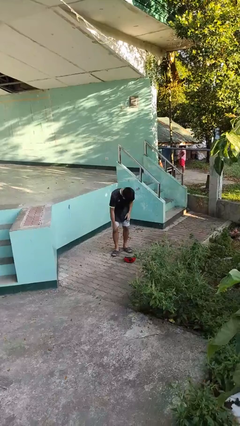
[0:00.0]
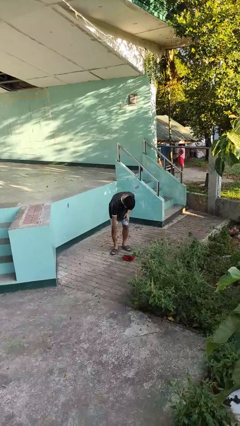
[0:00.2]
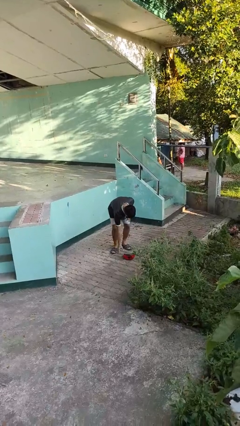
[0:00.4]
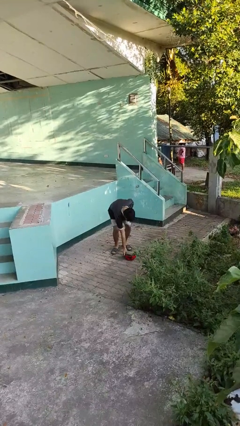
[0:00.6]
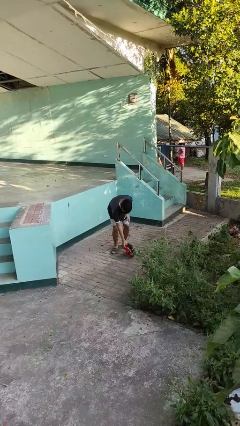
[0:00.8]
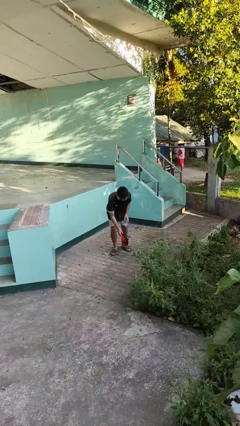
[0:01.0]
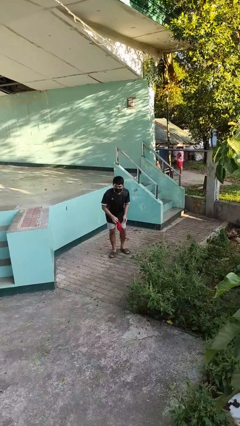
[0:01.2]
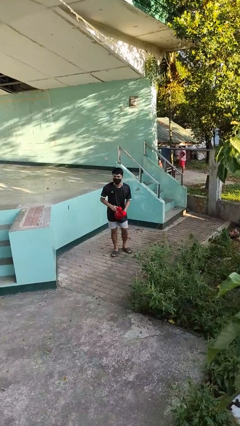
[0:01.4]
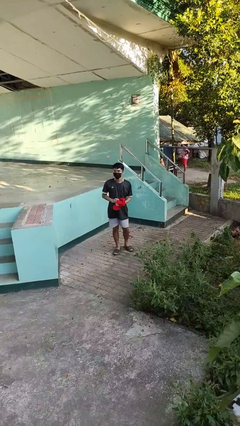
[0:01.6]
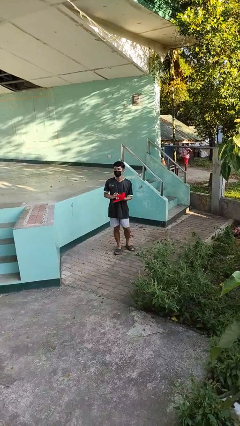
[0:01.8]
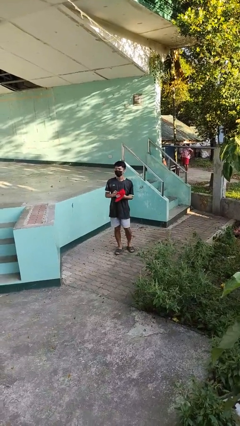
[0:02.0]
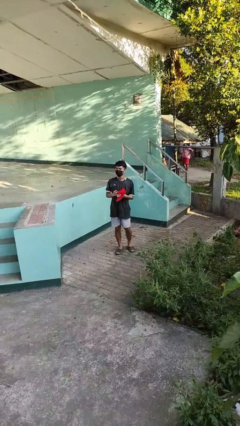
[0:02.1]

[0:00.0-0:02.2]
person picks up object from floor

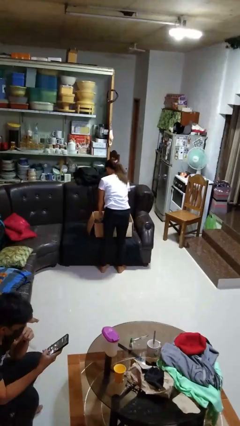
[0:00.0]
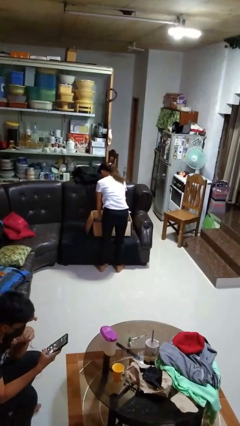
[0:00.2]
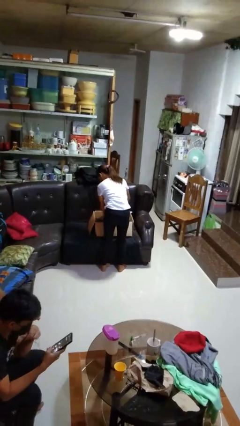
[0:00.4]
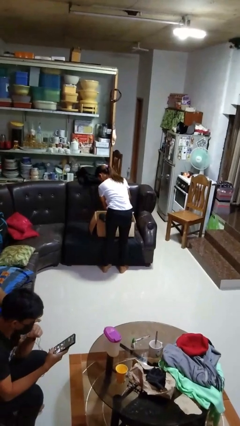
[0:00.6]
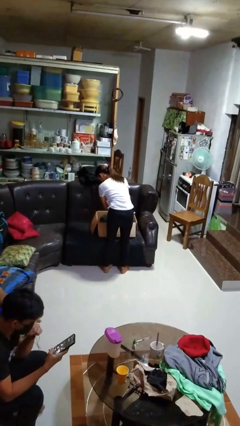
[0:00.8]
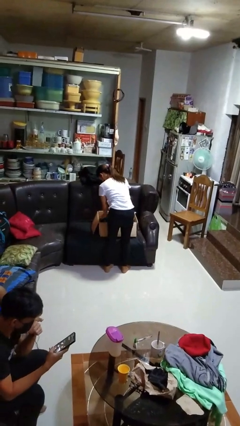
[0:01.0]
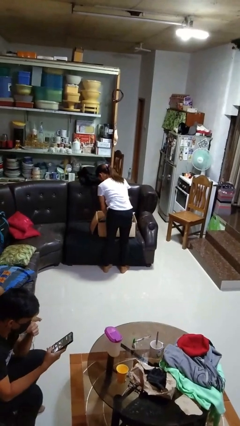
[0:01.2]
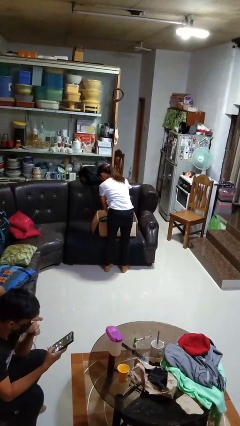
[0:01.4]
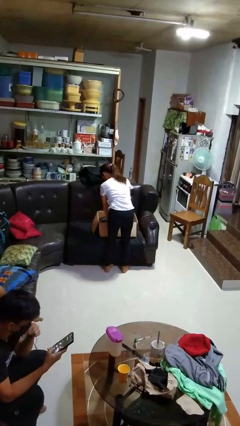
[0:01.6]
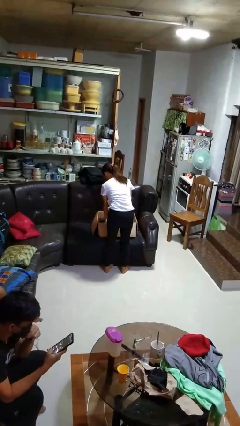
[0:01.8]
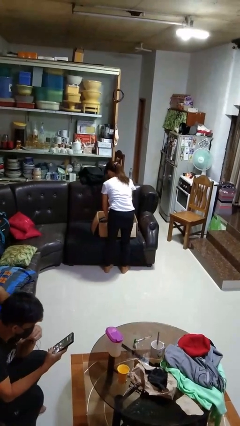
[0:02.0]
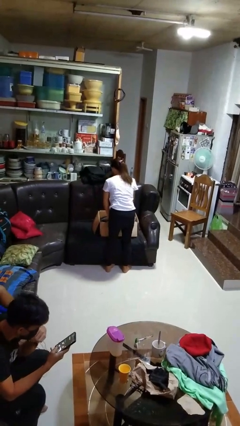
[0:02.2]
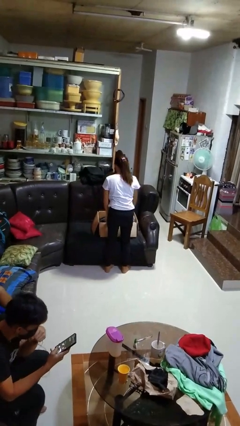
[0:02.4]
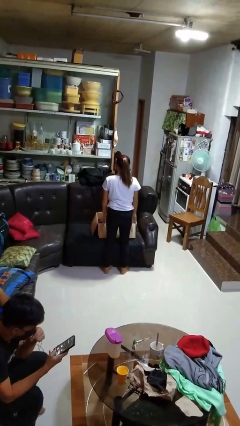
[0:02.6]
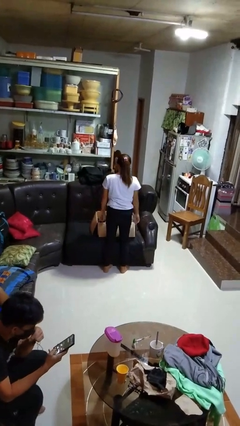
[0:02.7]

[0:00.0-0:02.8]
person searches in box

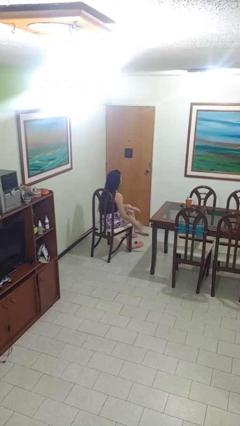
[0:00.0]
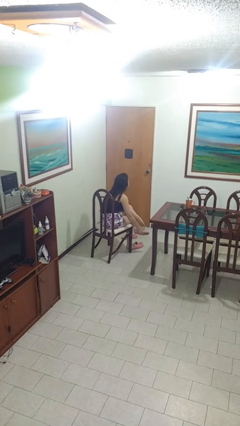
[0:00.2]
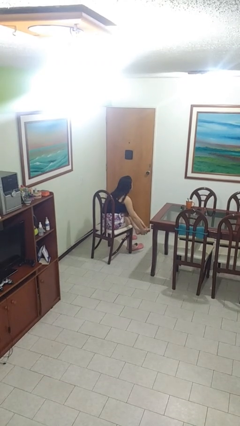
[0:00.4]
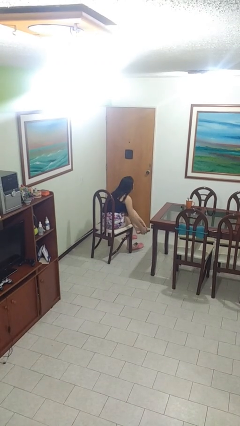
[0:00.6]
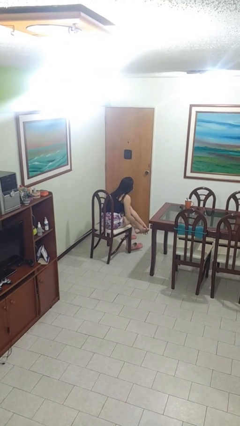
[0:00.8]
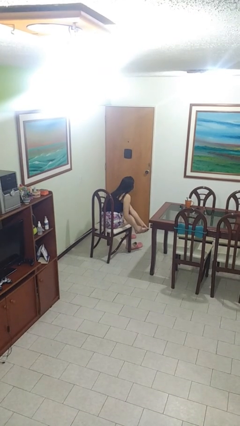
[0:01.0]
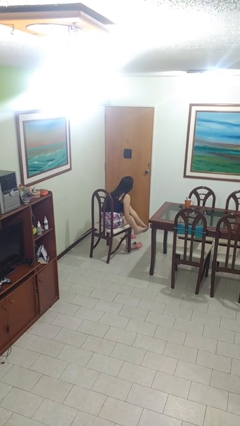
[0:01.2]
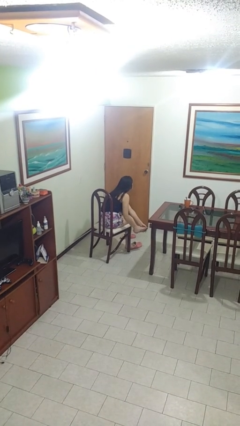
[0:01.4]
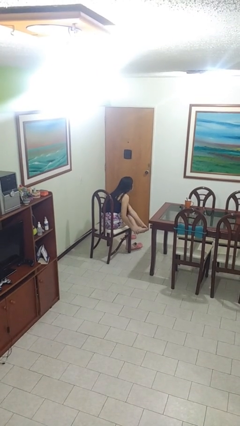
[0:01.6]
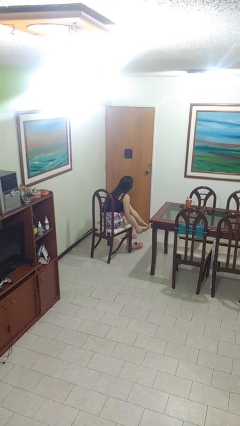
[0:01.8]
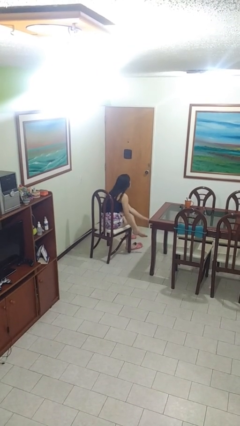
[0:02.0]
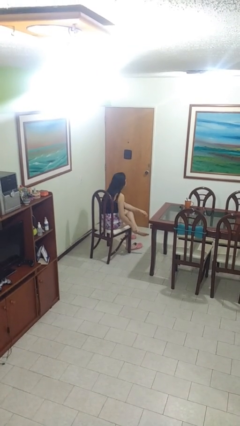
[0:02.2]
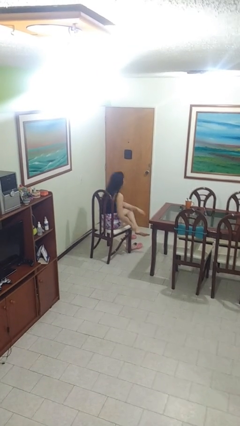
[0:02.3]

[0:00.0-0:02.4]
person rubs foot

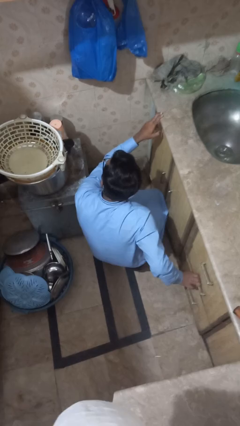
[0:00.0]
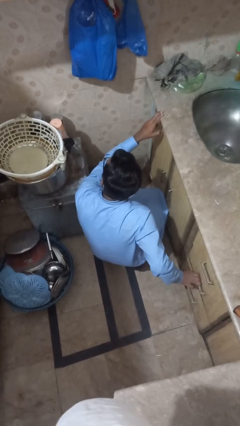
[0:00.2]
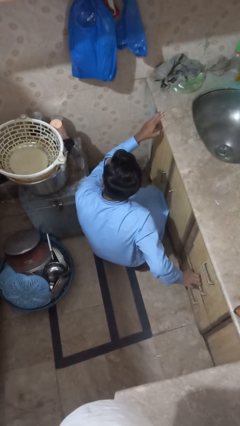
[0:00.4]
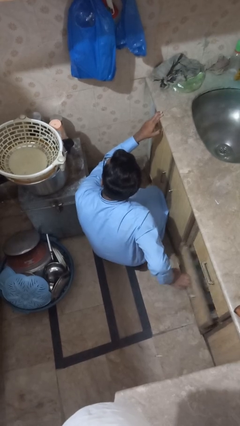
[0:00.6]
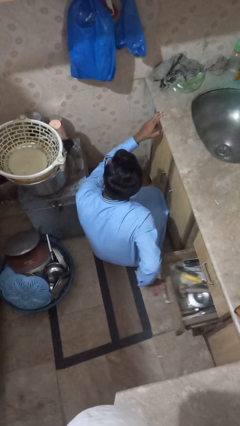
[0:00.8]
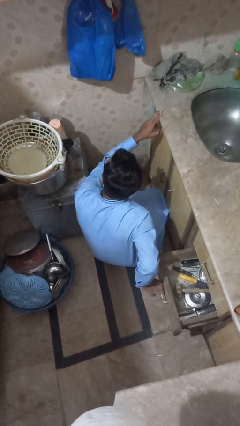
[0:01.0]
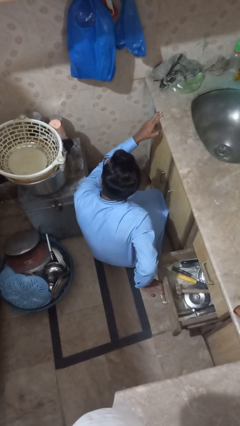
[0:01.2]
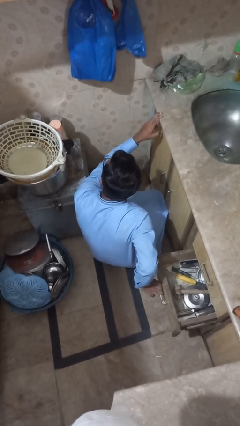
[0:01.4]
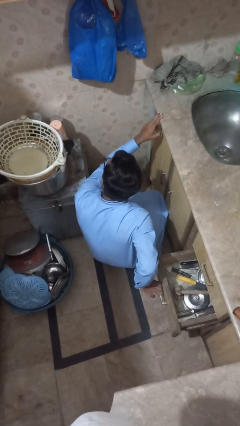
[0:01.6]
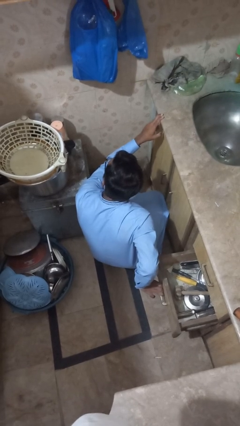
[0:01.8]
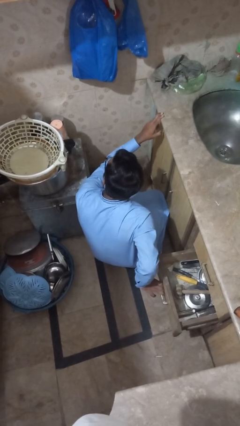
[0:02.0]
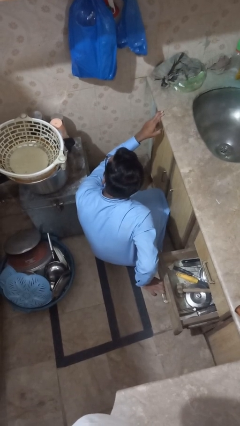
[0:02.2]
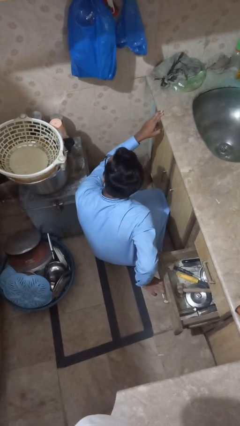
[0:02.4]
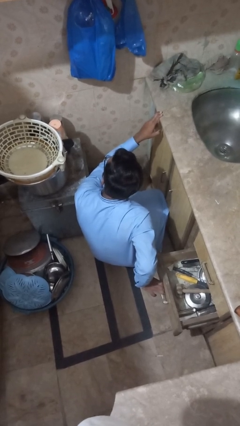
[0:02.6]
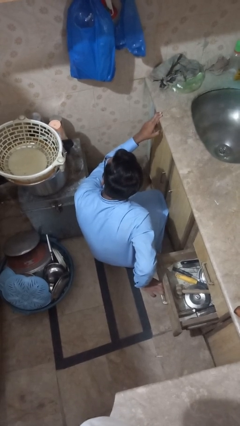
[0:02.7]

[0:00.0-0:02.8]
person opens kitchen drawer

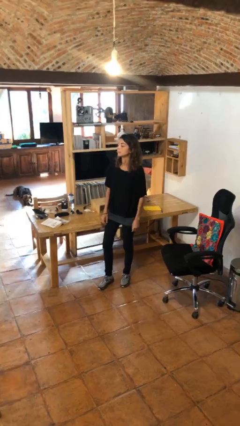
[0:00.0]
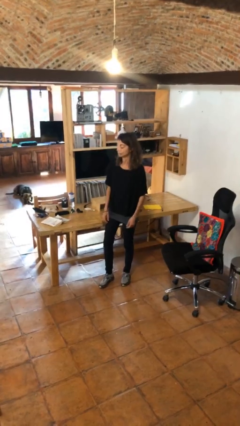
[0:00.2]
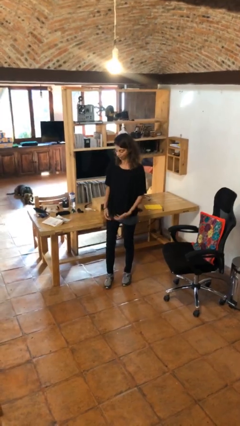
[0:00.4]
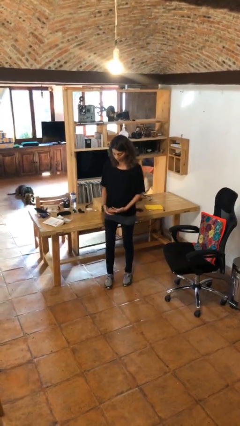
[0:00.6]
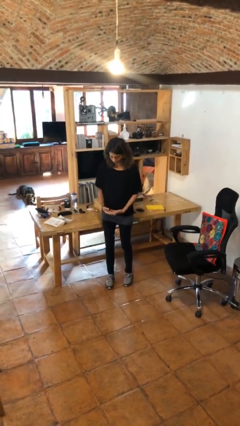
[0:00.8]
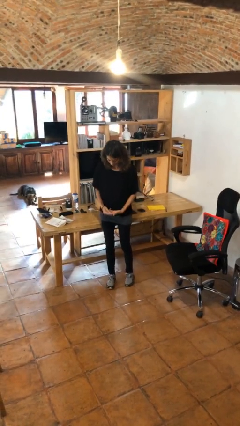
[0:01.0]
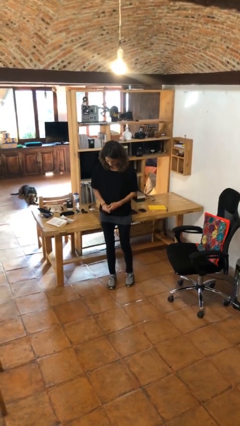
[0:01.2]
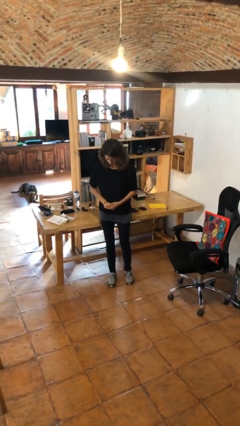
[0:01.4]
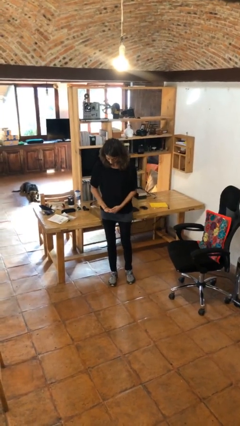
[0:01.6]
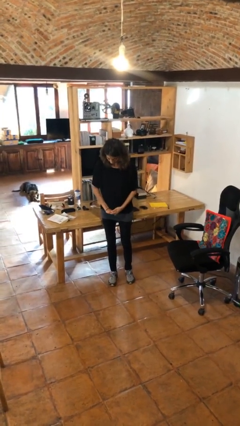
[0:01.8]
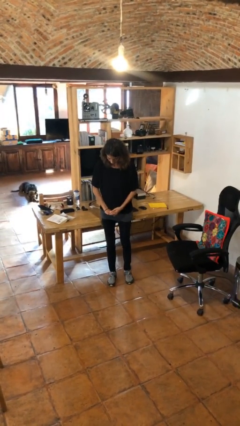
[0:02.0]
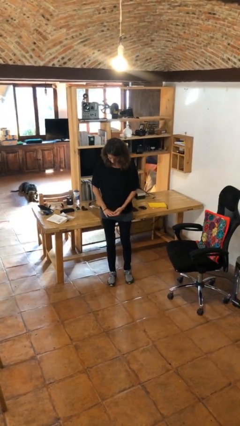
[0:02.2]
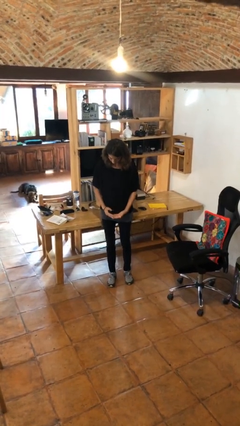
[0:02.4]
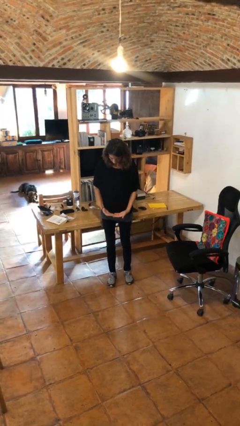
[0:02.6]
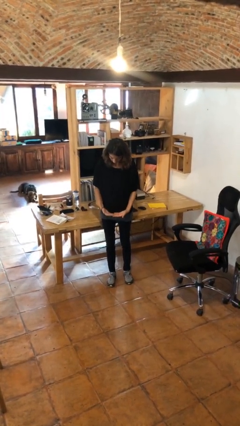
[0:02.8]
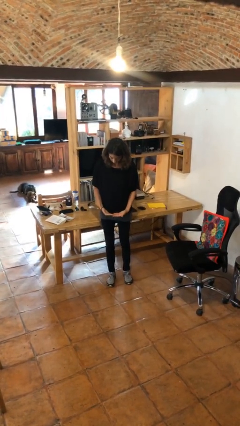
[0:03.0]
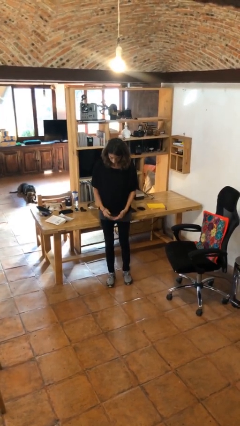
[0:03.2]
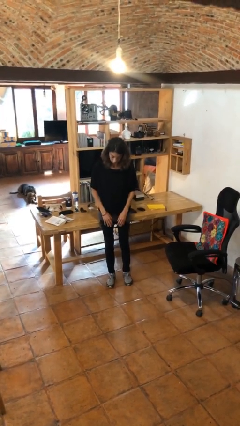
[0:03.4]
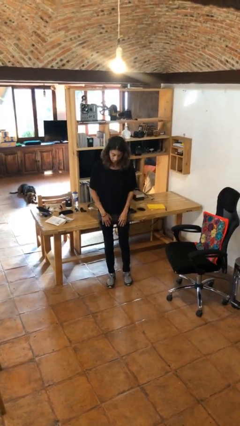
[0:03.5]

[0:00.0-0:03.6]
person looks at hands in lap

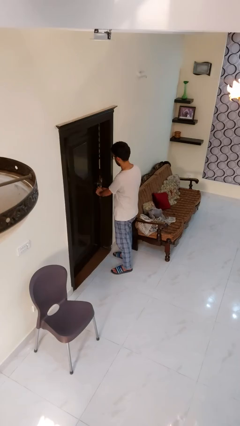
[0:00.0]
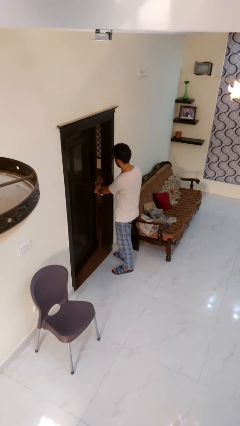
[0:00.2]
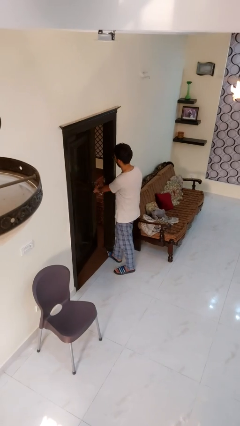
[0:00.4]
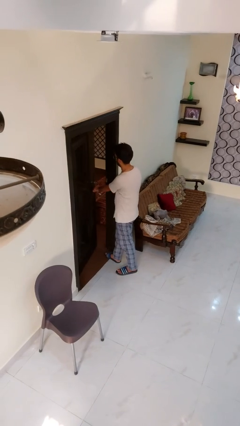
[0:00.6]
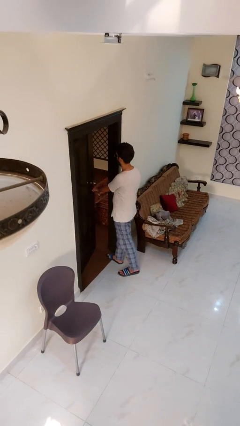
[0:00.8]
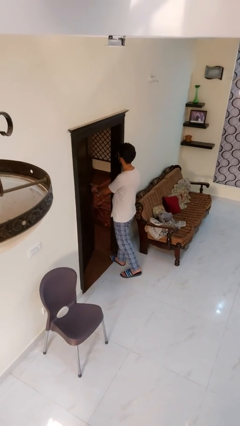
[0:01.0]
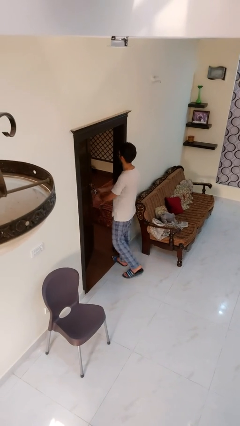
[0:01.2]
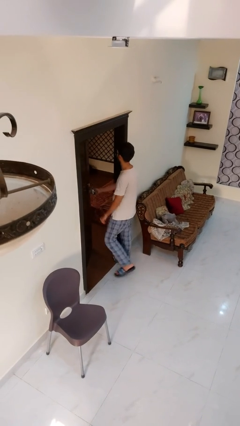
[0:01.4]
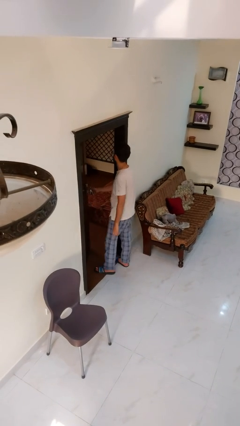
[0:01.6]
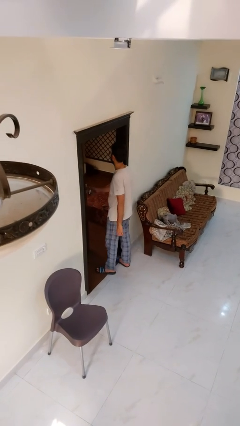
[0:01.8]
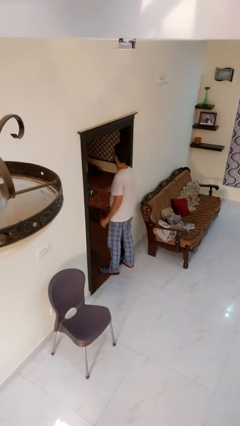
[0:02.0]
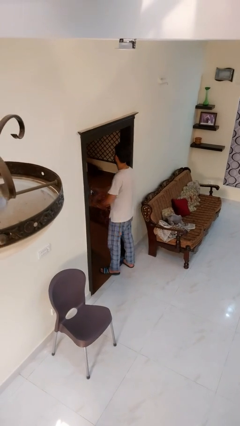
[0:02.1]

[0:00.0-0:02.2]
person opens facility door

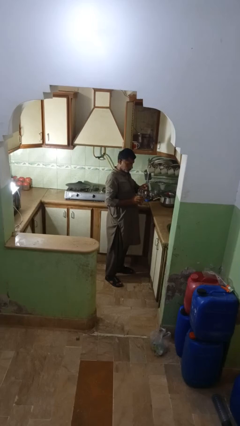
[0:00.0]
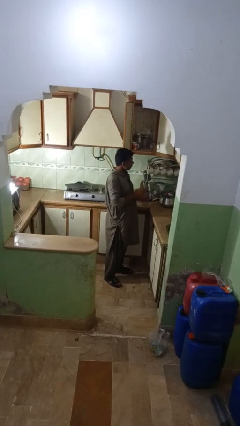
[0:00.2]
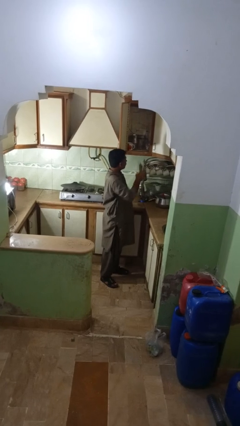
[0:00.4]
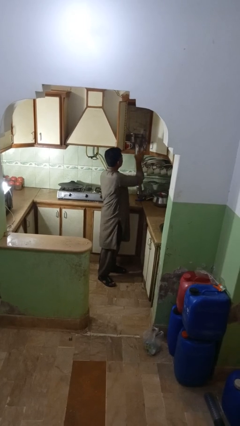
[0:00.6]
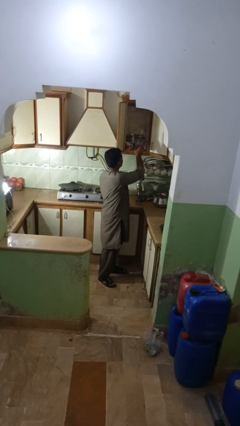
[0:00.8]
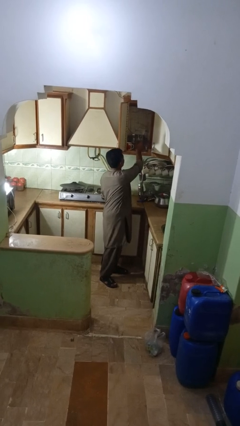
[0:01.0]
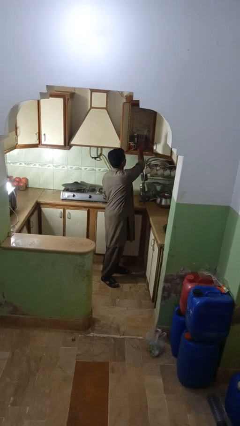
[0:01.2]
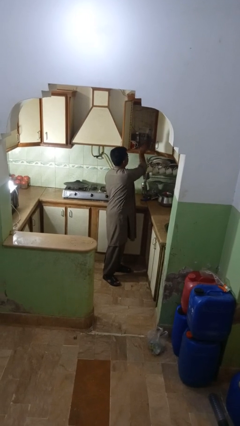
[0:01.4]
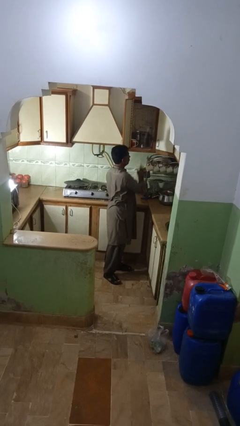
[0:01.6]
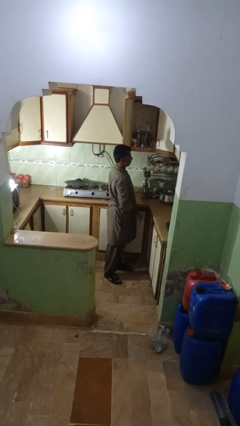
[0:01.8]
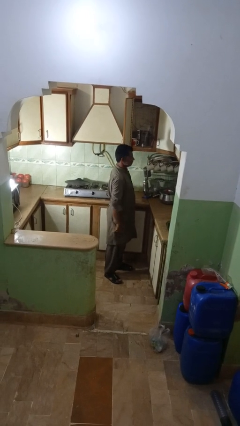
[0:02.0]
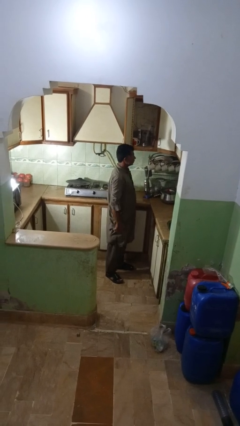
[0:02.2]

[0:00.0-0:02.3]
person puts object into kitchen drawer
